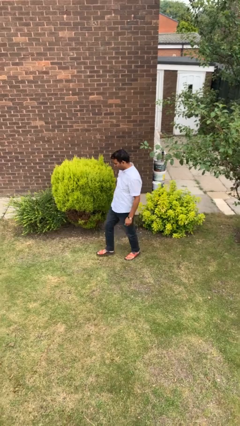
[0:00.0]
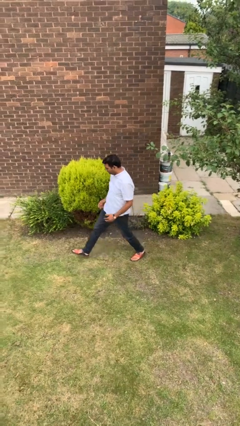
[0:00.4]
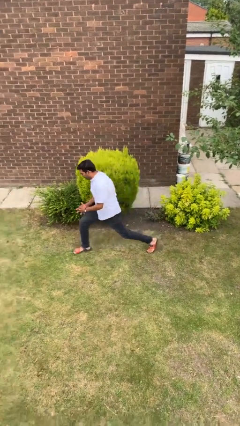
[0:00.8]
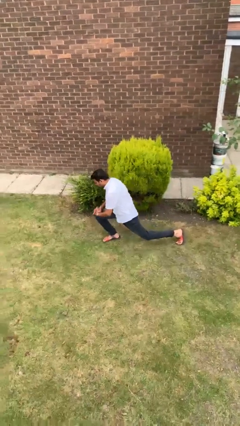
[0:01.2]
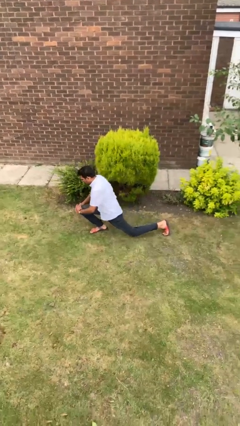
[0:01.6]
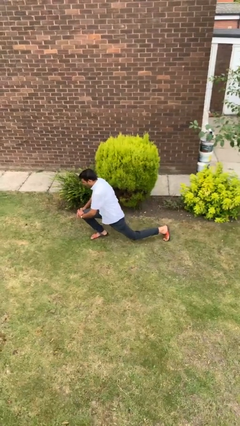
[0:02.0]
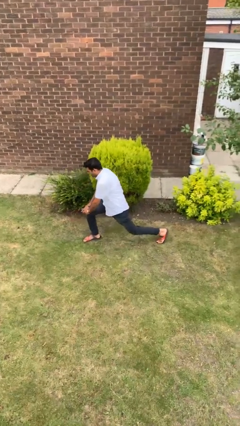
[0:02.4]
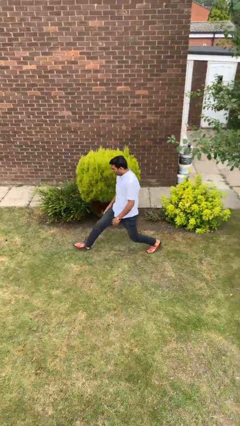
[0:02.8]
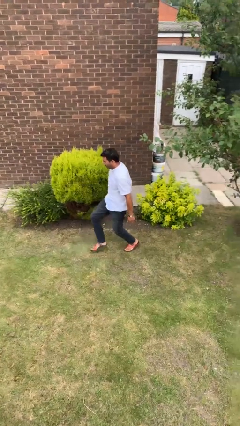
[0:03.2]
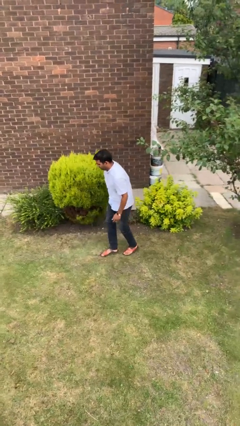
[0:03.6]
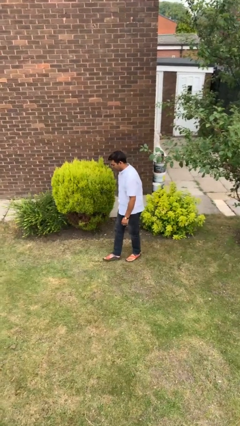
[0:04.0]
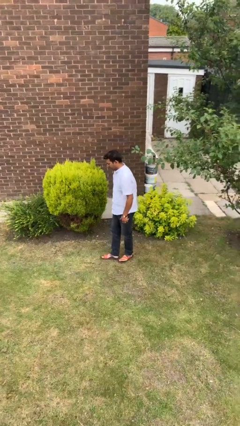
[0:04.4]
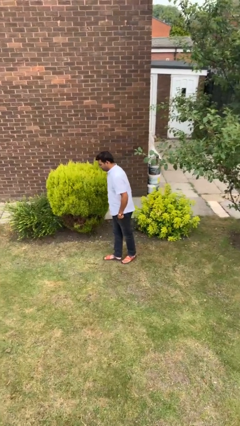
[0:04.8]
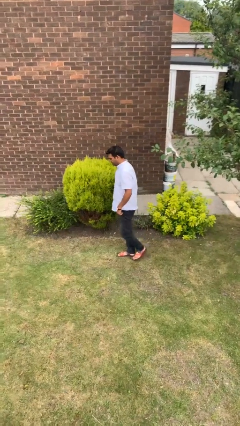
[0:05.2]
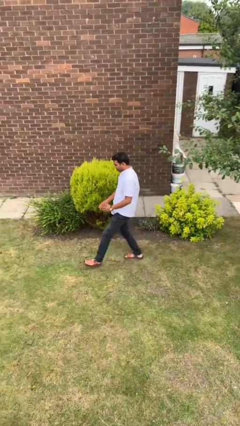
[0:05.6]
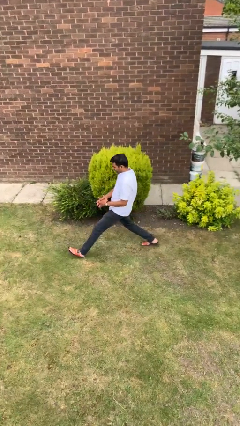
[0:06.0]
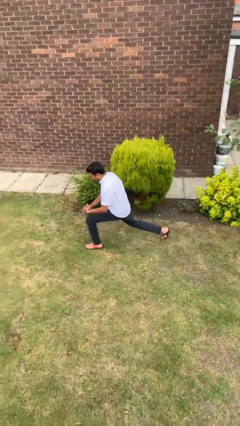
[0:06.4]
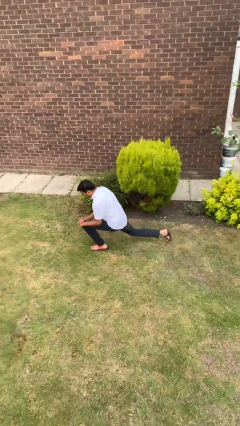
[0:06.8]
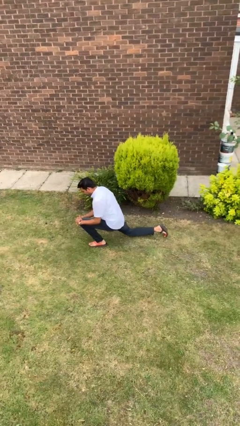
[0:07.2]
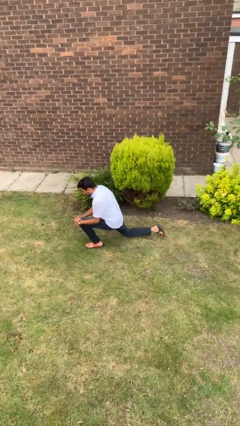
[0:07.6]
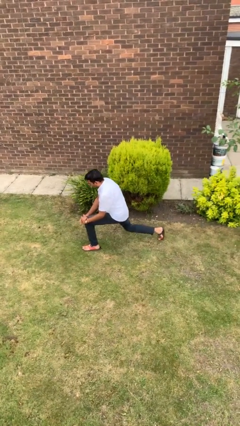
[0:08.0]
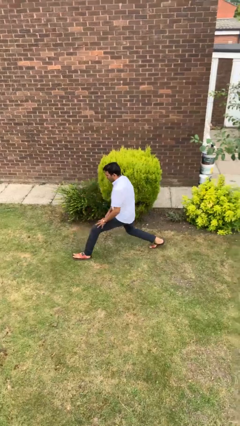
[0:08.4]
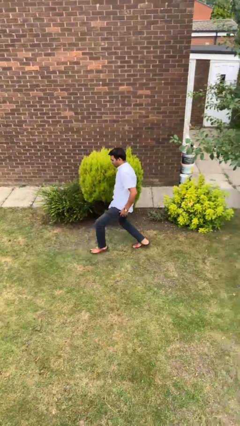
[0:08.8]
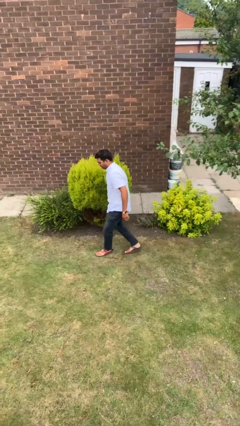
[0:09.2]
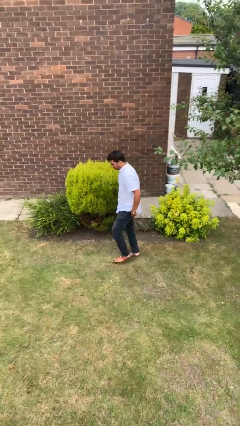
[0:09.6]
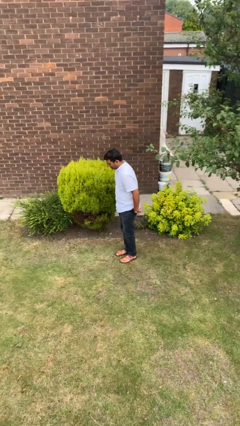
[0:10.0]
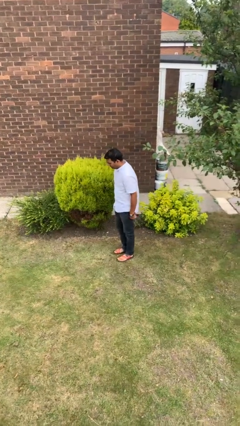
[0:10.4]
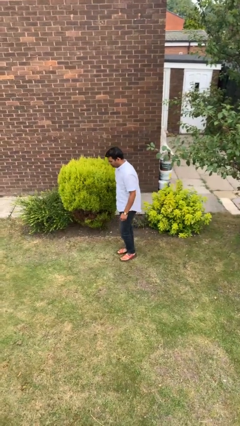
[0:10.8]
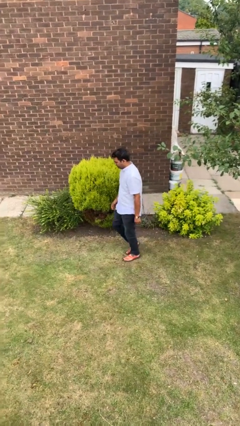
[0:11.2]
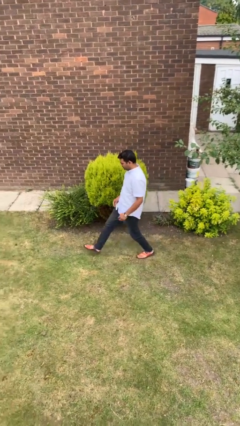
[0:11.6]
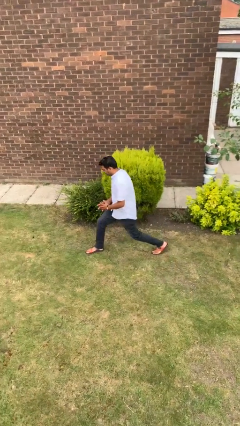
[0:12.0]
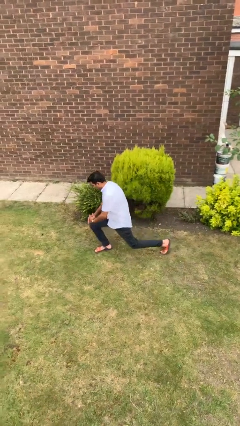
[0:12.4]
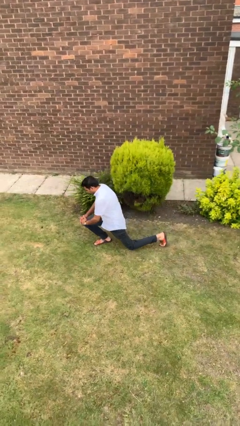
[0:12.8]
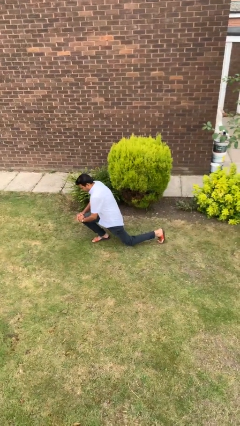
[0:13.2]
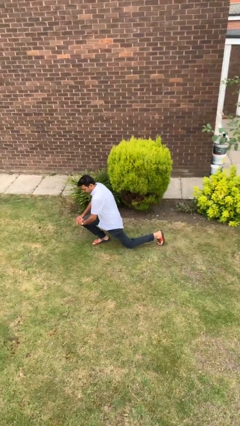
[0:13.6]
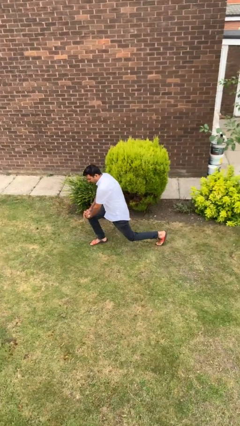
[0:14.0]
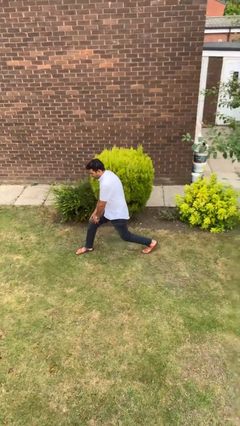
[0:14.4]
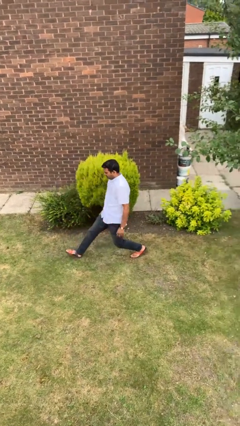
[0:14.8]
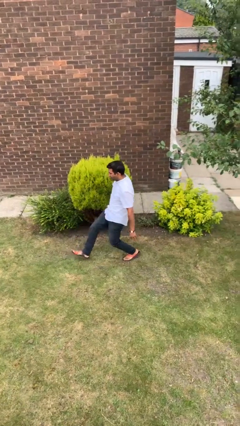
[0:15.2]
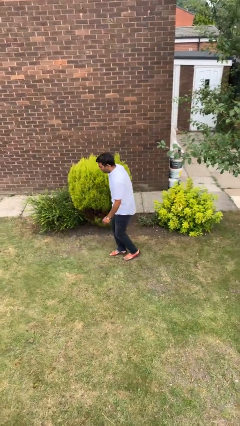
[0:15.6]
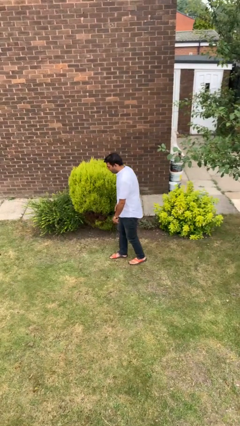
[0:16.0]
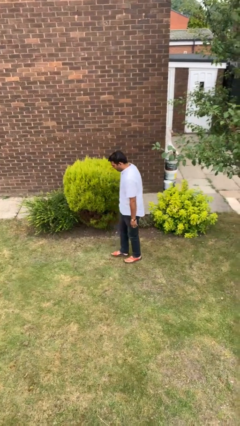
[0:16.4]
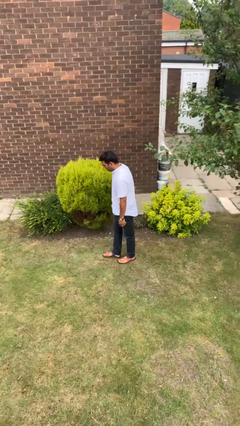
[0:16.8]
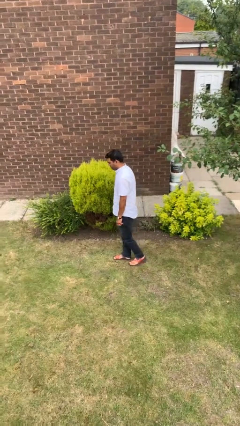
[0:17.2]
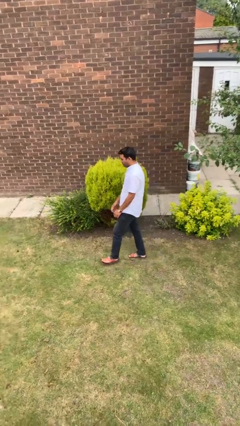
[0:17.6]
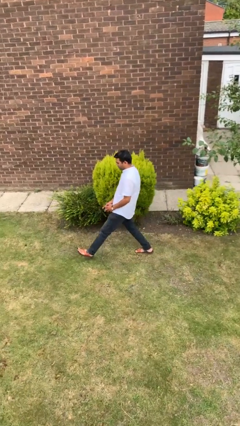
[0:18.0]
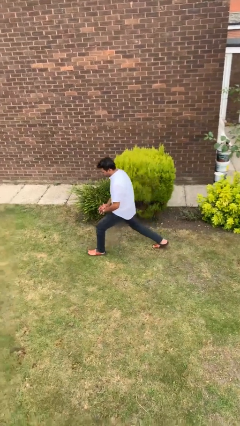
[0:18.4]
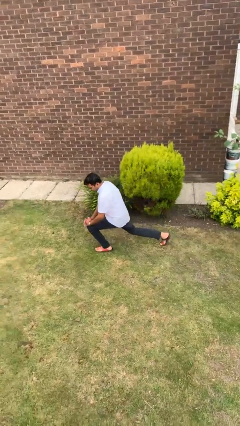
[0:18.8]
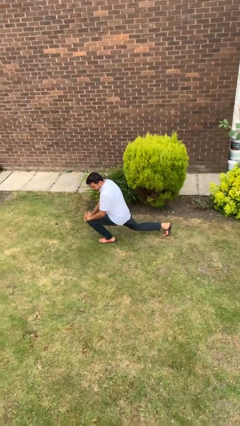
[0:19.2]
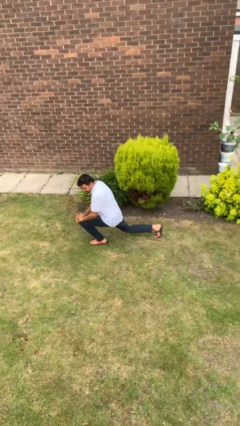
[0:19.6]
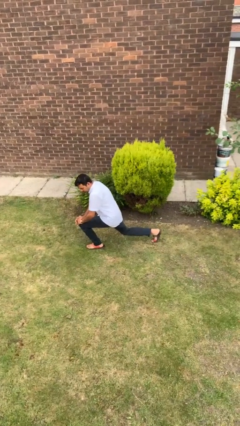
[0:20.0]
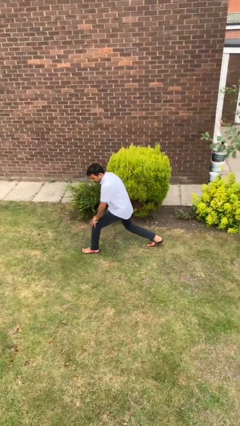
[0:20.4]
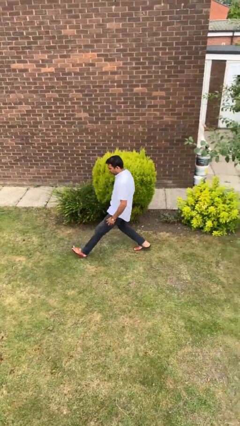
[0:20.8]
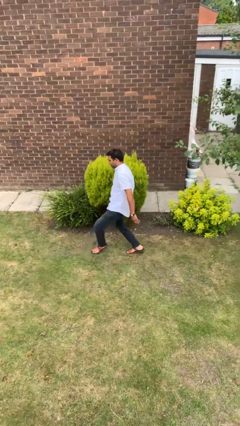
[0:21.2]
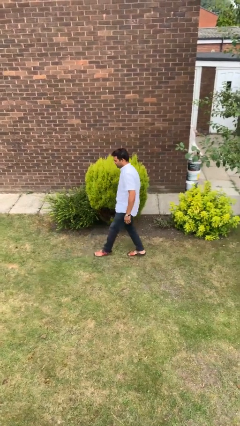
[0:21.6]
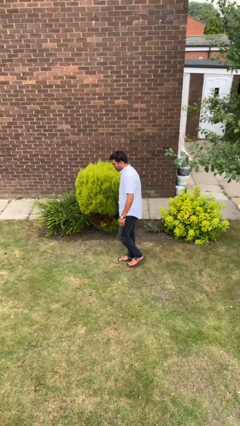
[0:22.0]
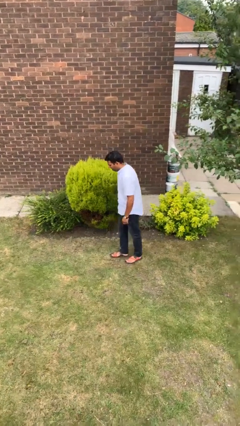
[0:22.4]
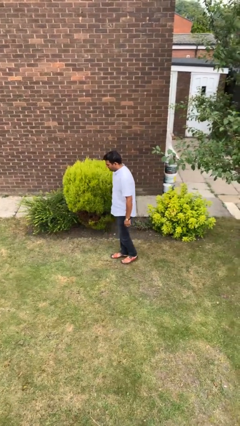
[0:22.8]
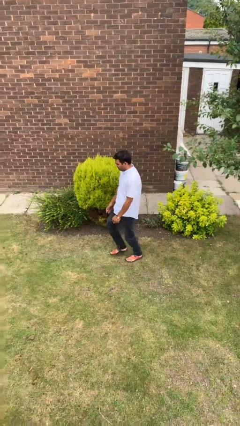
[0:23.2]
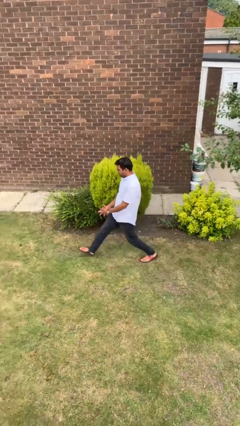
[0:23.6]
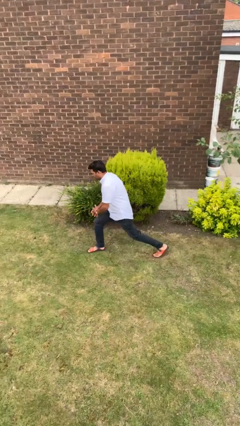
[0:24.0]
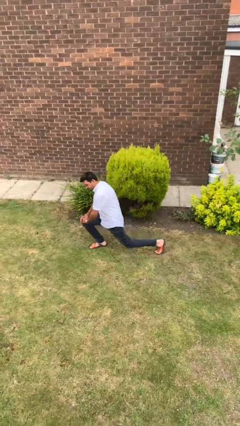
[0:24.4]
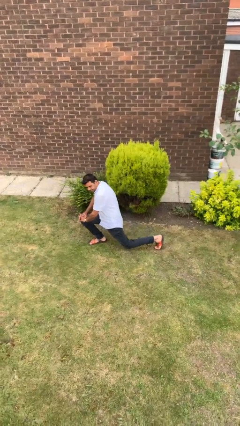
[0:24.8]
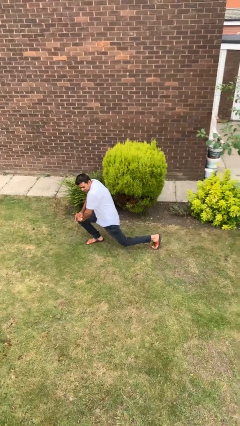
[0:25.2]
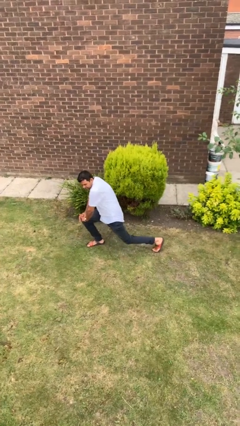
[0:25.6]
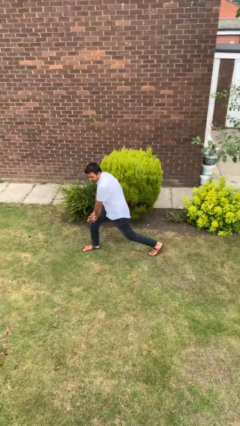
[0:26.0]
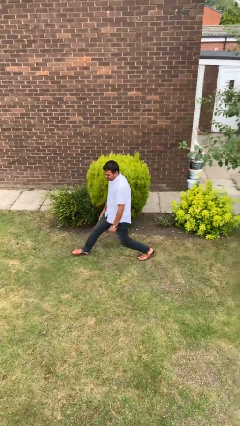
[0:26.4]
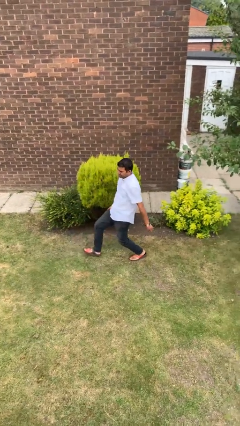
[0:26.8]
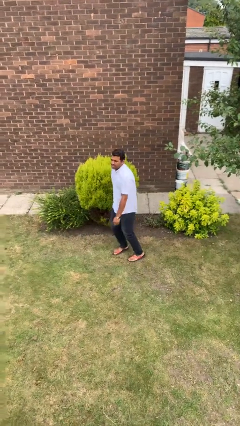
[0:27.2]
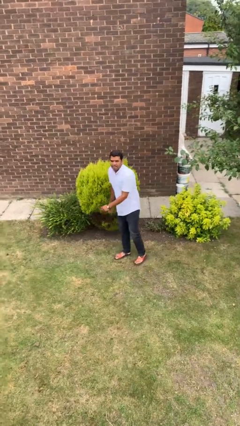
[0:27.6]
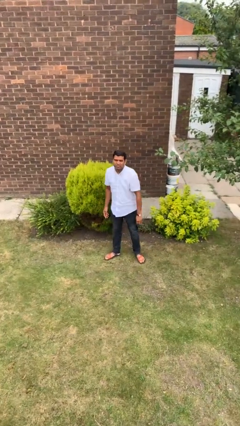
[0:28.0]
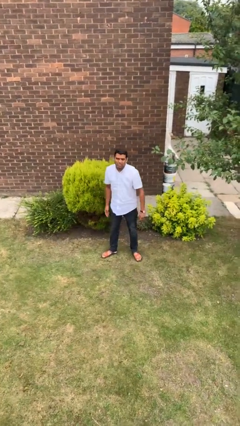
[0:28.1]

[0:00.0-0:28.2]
person exercises with lunges

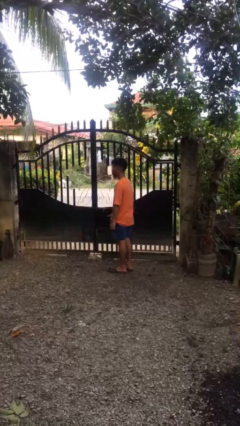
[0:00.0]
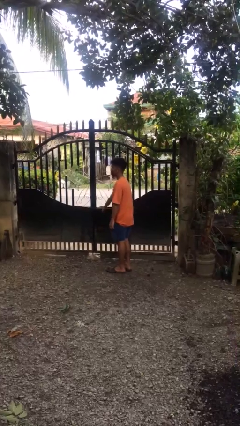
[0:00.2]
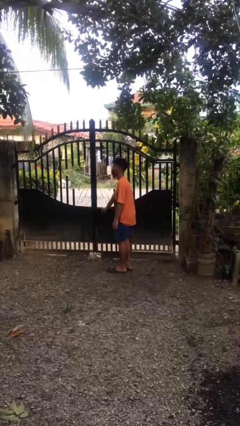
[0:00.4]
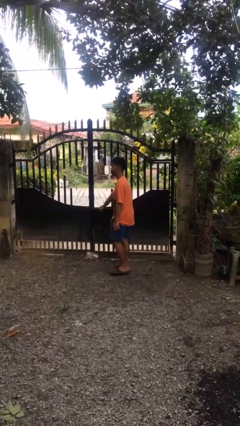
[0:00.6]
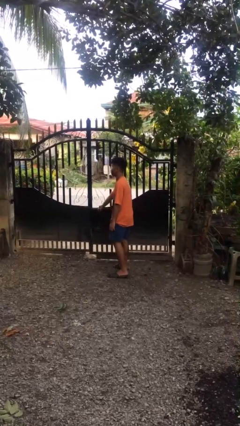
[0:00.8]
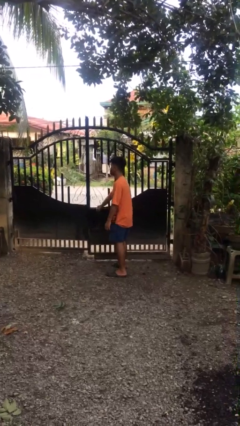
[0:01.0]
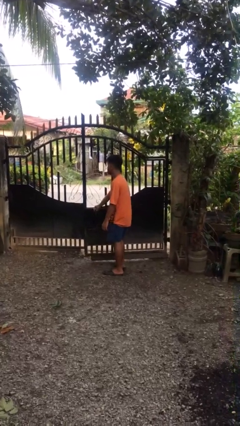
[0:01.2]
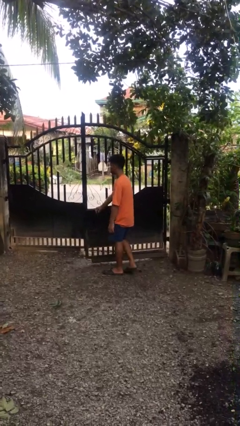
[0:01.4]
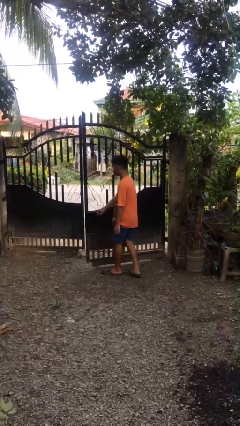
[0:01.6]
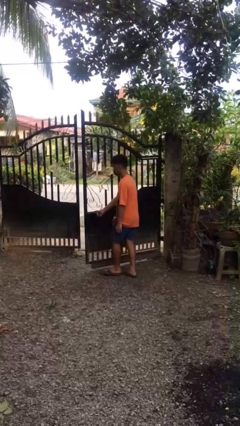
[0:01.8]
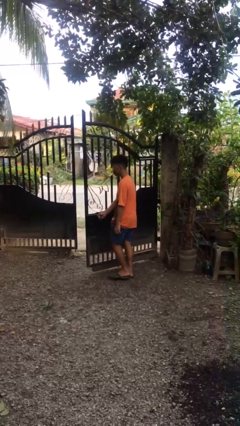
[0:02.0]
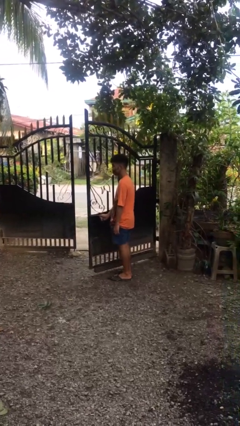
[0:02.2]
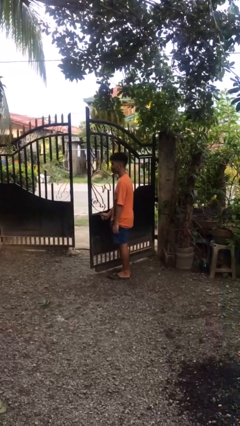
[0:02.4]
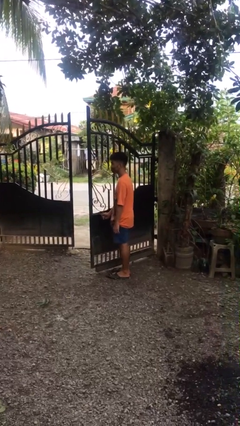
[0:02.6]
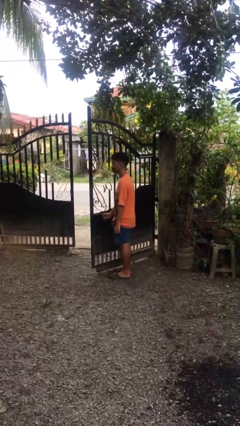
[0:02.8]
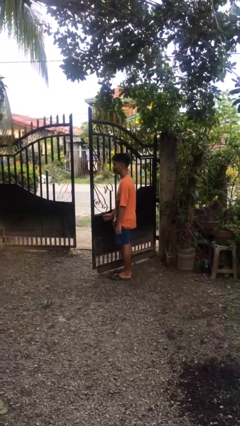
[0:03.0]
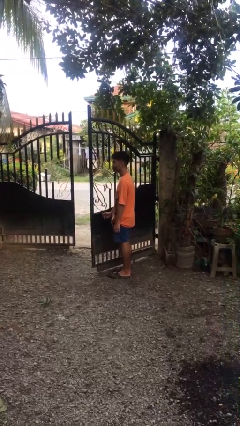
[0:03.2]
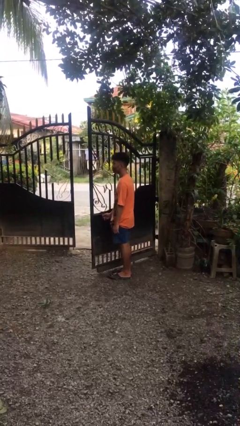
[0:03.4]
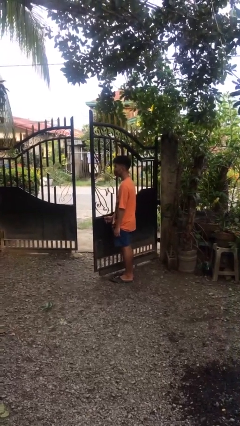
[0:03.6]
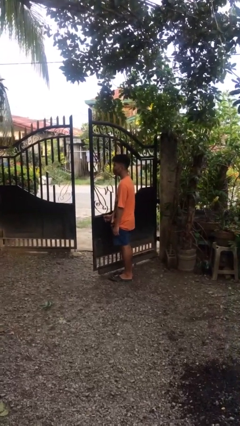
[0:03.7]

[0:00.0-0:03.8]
person opens gate
